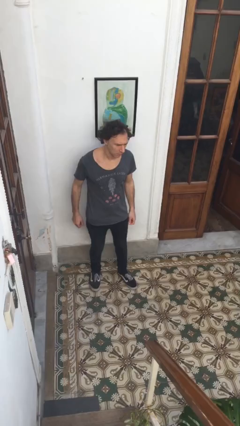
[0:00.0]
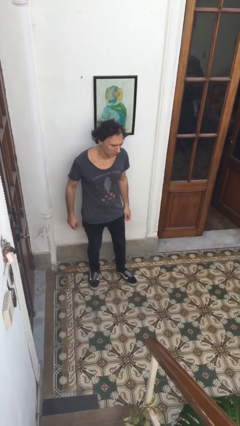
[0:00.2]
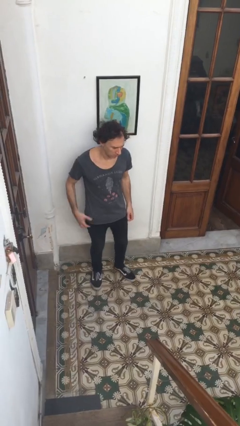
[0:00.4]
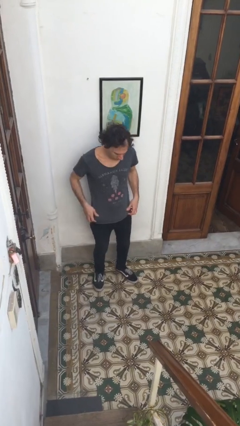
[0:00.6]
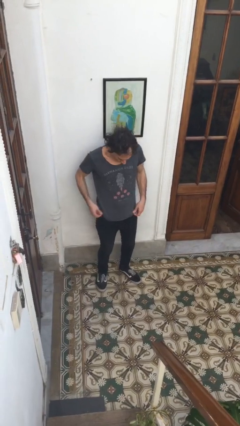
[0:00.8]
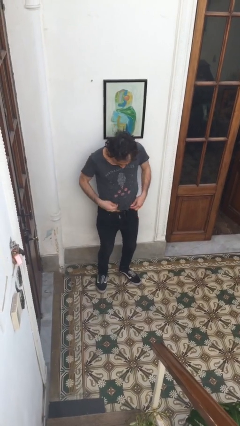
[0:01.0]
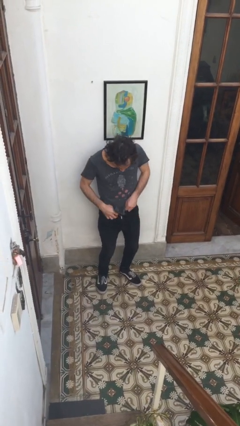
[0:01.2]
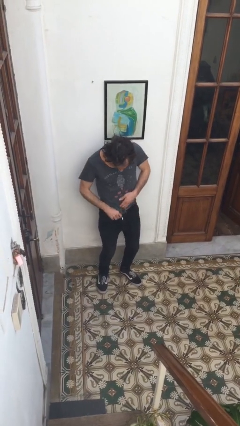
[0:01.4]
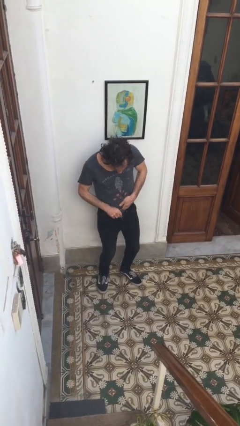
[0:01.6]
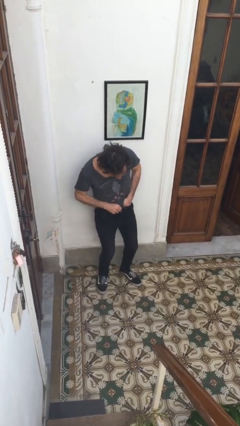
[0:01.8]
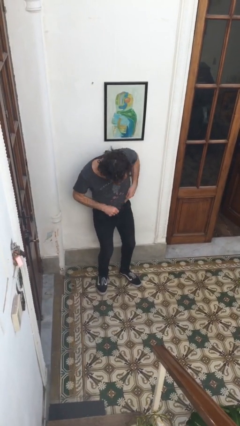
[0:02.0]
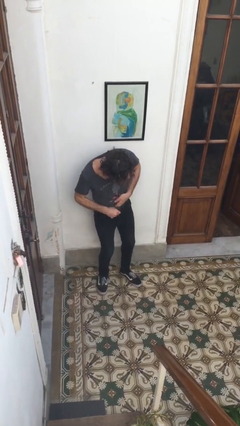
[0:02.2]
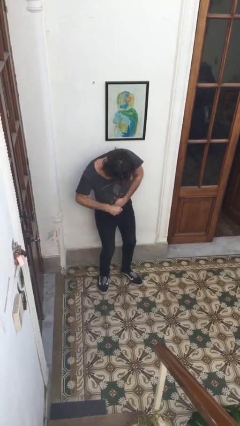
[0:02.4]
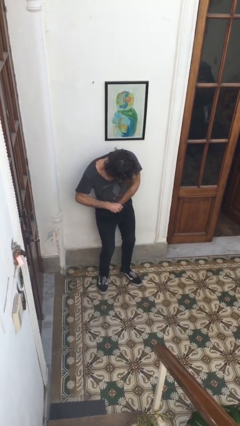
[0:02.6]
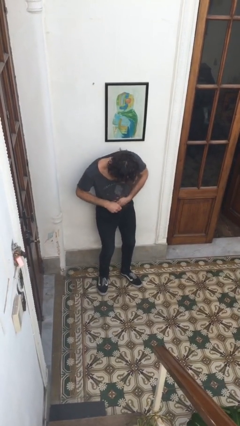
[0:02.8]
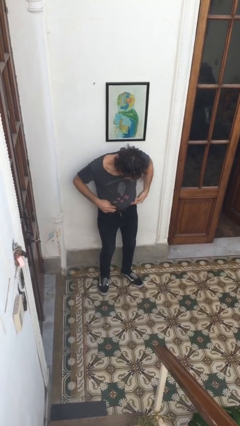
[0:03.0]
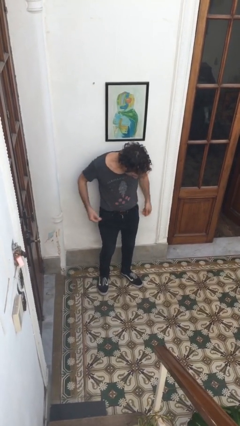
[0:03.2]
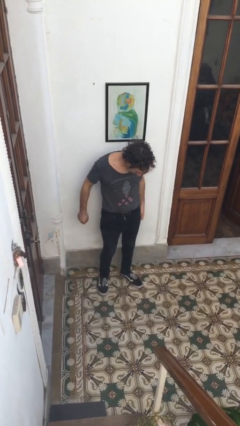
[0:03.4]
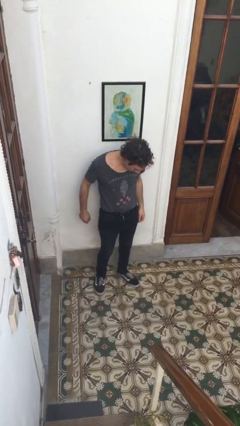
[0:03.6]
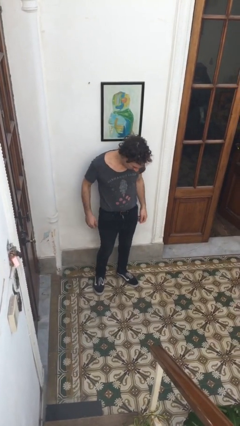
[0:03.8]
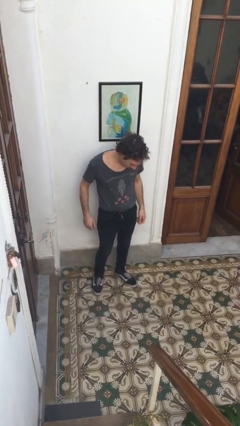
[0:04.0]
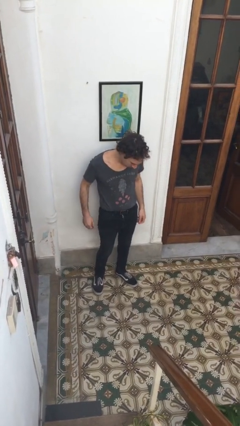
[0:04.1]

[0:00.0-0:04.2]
person tucks in shirt

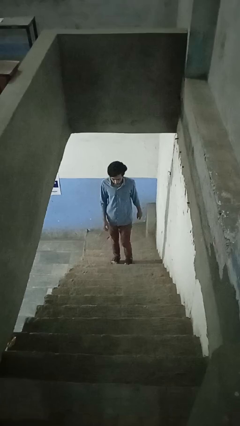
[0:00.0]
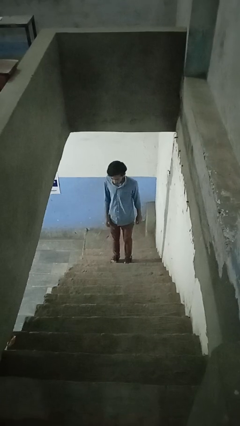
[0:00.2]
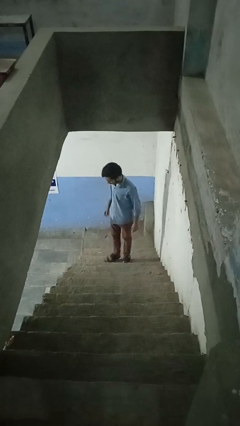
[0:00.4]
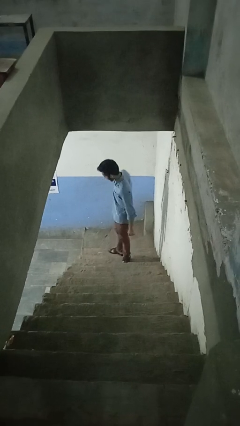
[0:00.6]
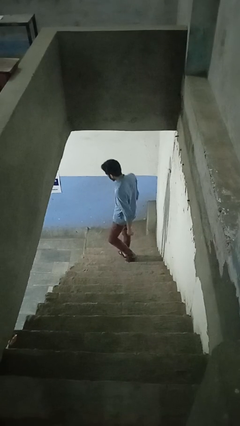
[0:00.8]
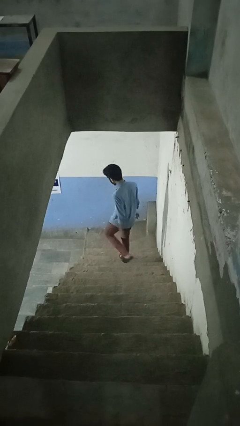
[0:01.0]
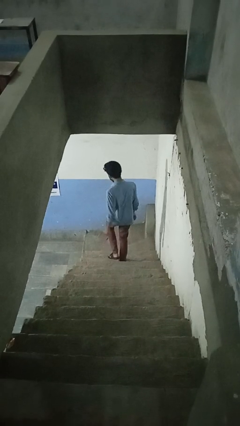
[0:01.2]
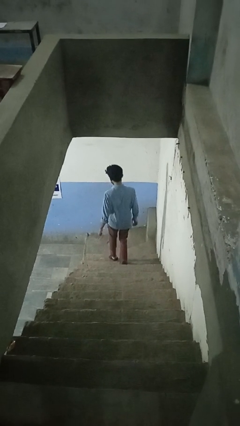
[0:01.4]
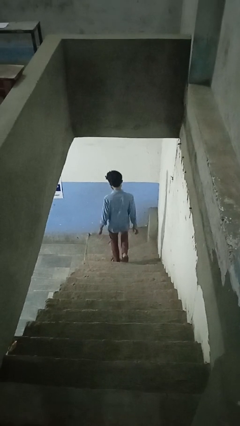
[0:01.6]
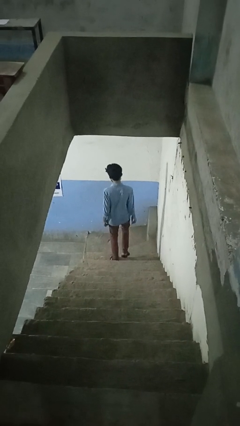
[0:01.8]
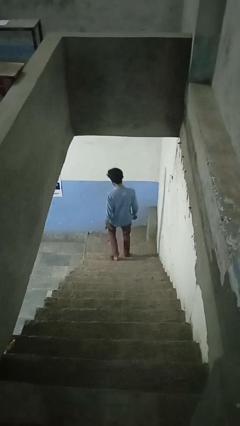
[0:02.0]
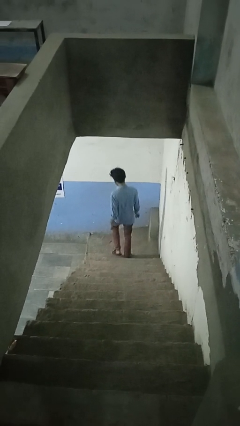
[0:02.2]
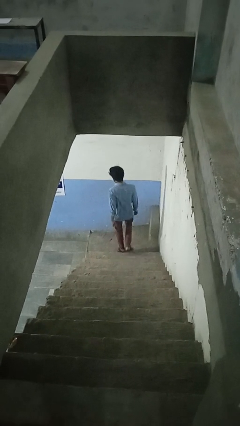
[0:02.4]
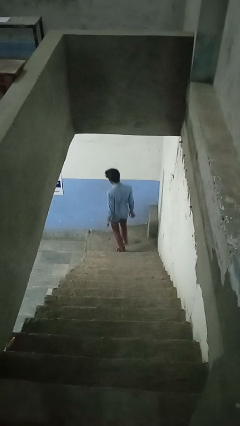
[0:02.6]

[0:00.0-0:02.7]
person climbs down stairs

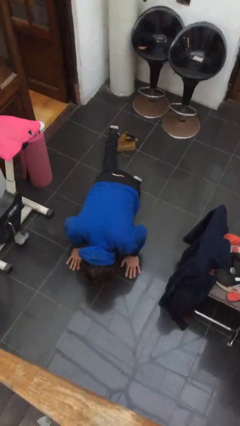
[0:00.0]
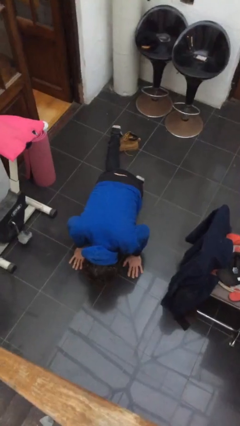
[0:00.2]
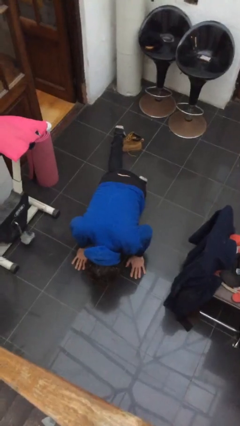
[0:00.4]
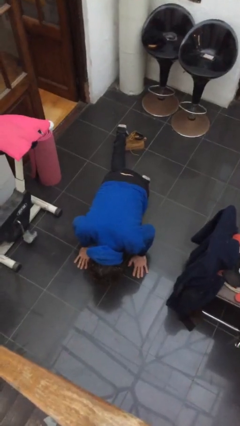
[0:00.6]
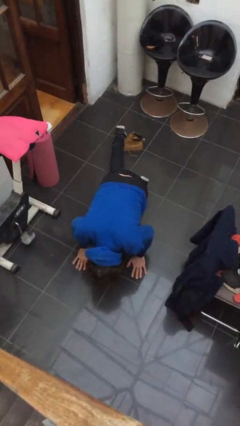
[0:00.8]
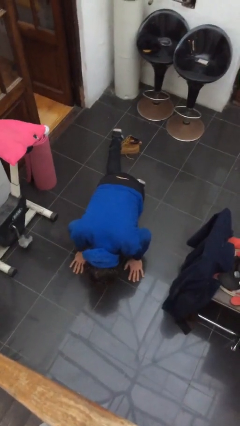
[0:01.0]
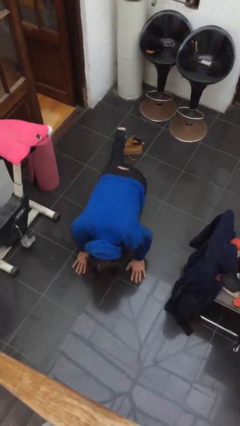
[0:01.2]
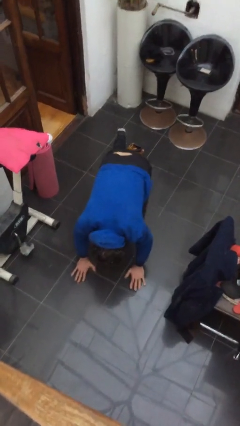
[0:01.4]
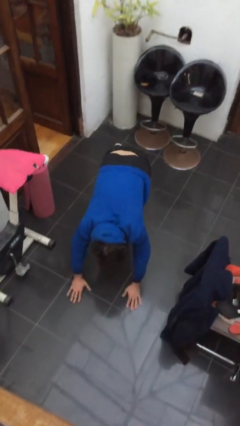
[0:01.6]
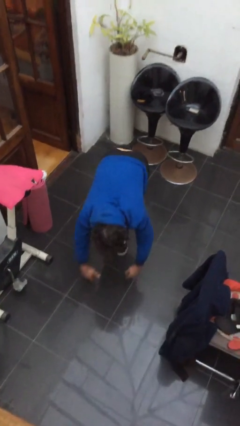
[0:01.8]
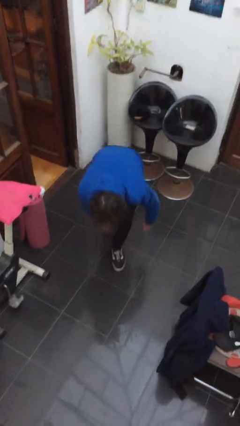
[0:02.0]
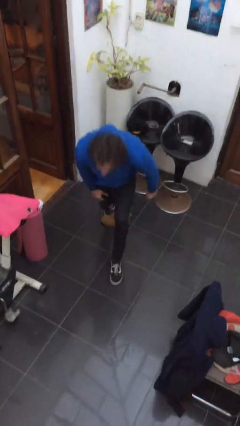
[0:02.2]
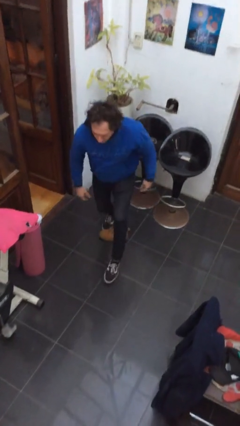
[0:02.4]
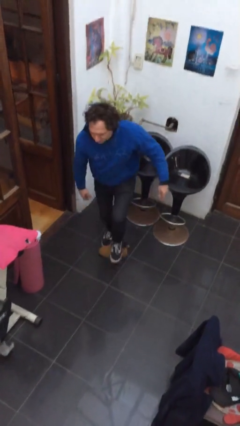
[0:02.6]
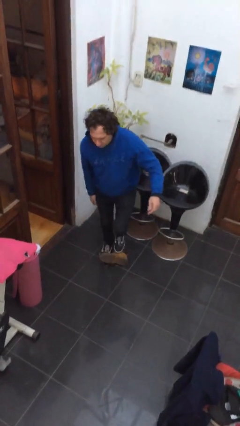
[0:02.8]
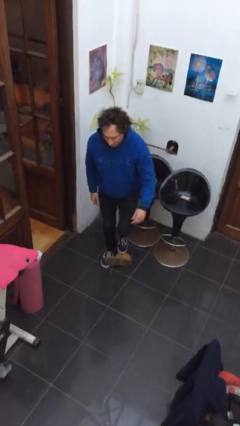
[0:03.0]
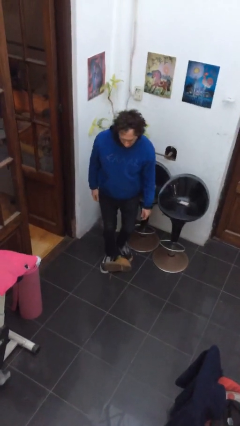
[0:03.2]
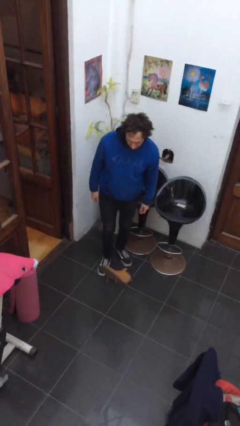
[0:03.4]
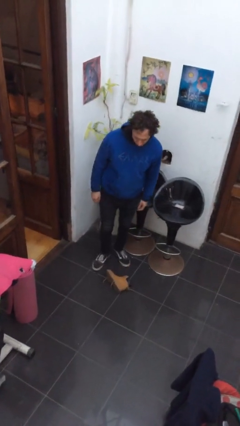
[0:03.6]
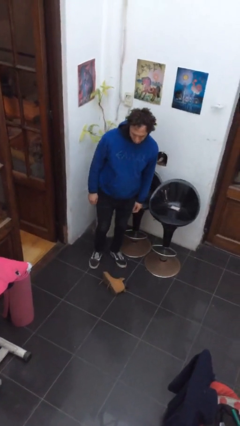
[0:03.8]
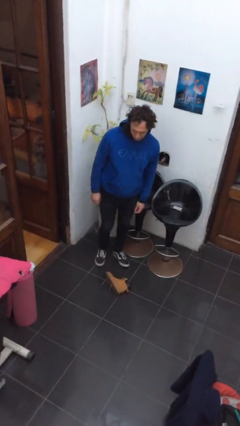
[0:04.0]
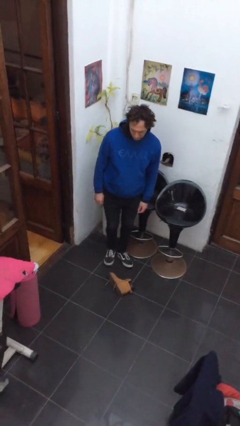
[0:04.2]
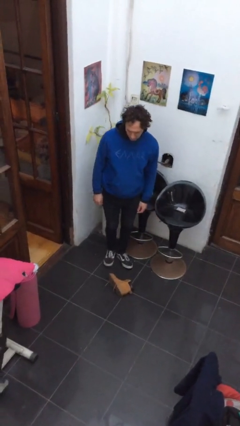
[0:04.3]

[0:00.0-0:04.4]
person stands up from floor

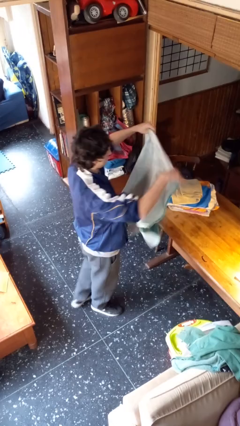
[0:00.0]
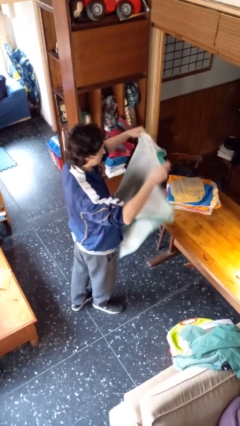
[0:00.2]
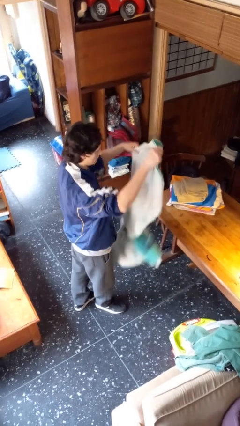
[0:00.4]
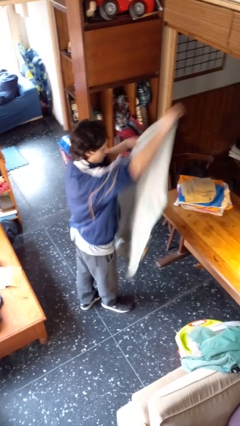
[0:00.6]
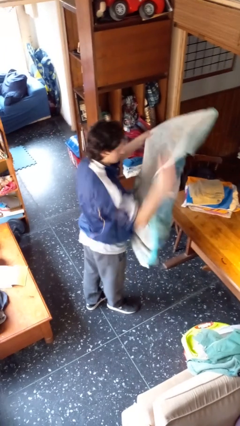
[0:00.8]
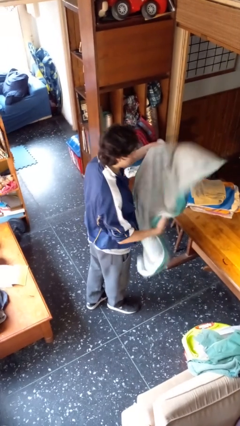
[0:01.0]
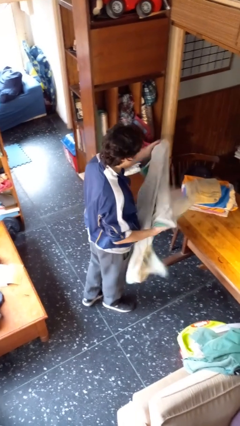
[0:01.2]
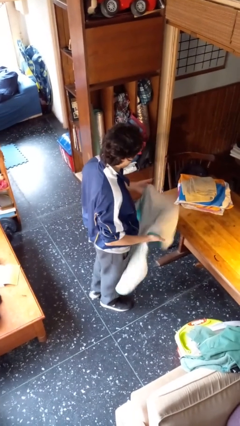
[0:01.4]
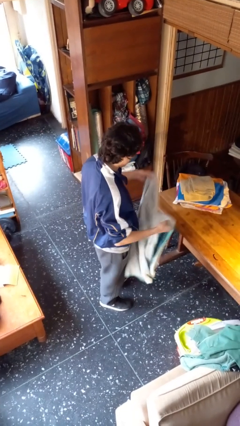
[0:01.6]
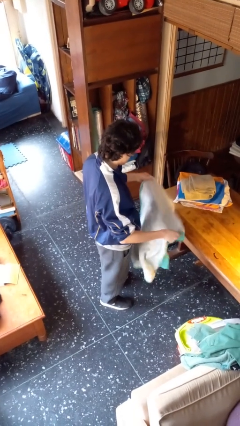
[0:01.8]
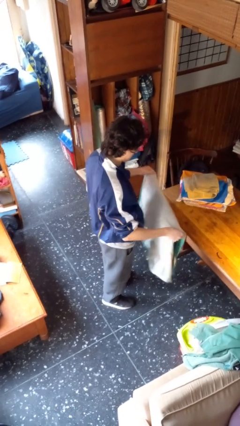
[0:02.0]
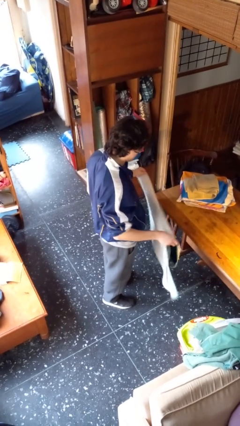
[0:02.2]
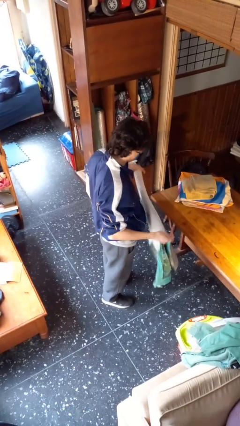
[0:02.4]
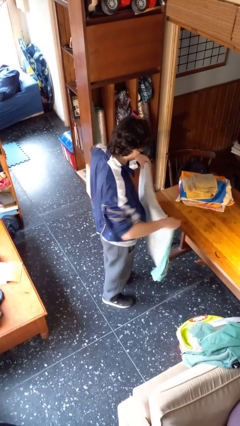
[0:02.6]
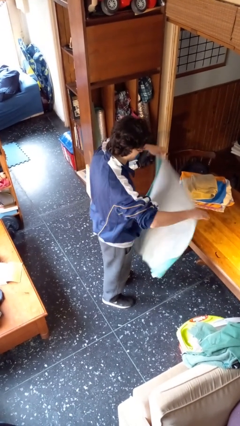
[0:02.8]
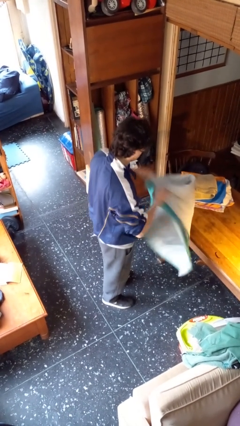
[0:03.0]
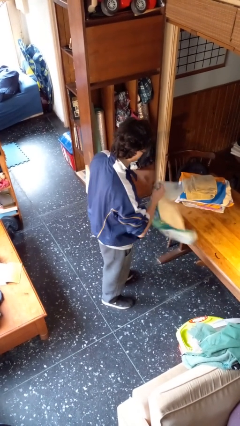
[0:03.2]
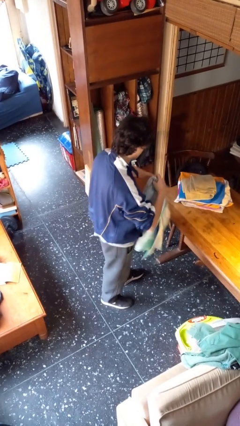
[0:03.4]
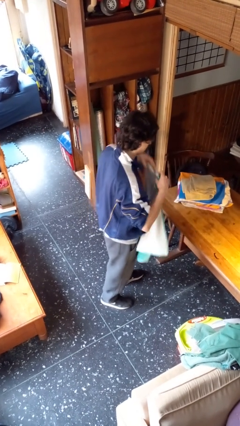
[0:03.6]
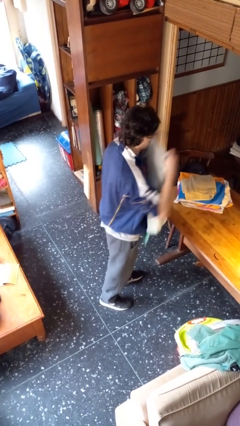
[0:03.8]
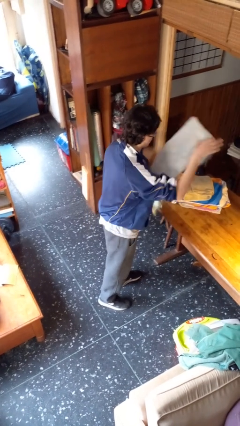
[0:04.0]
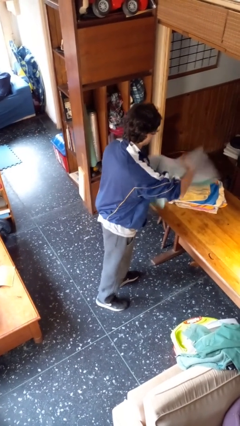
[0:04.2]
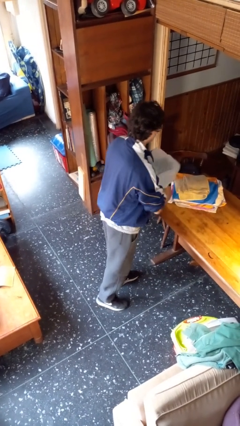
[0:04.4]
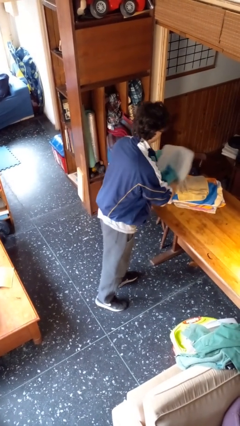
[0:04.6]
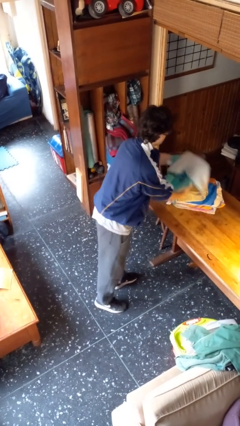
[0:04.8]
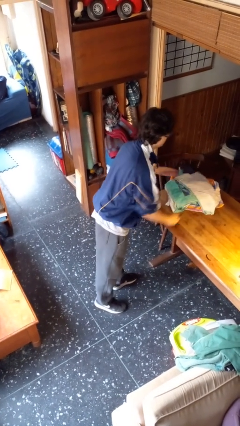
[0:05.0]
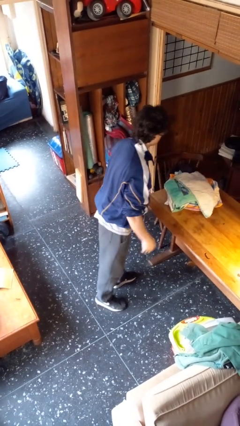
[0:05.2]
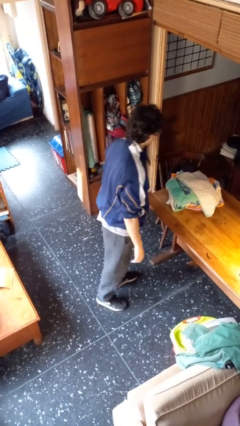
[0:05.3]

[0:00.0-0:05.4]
person folds towel

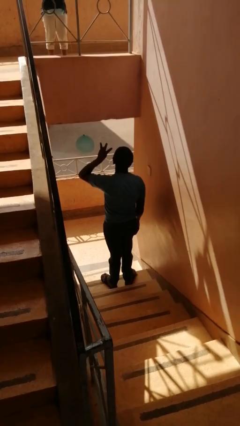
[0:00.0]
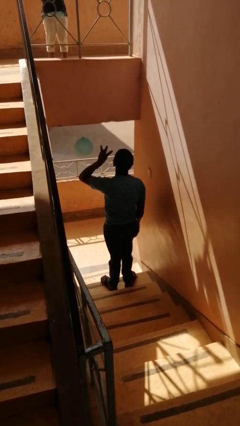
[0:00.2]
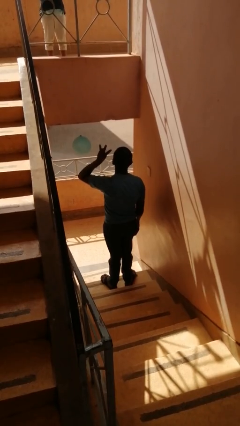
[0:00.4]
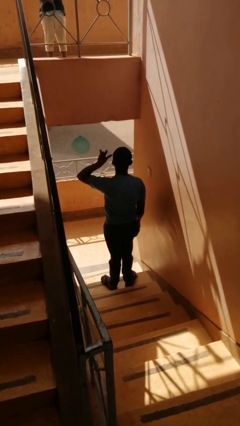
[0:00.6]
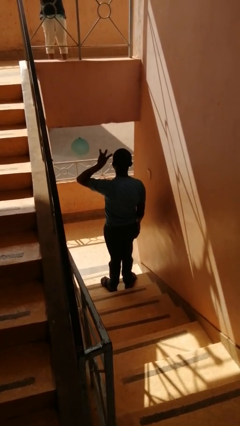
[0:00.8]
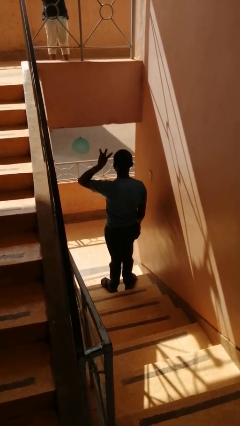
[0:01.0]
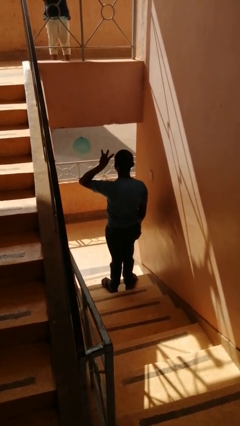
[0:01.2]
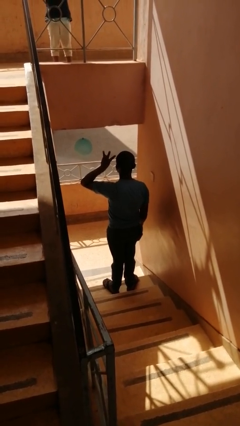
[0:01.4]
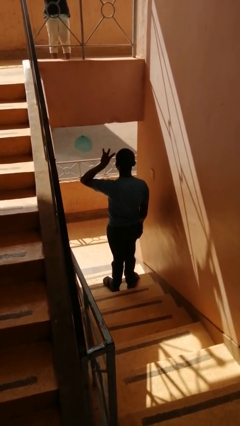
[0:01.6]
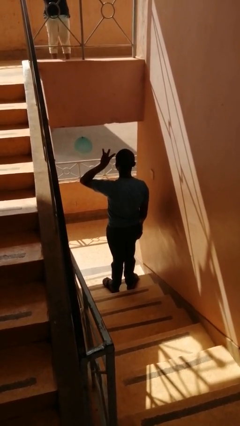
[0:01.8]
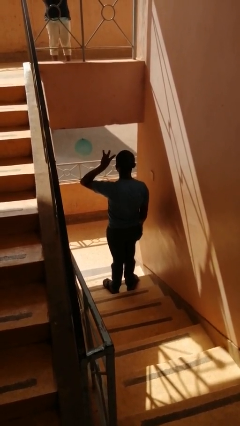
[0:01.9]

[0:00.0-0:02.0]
person gestures number three
